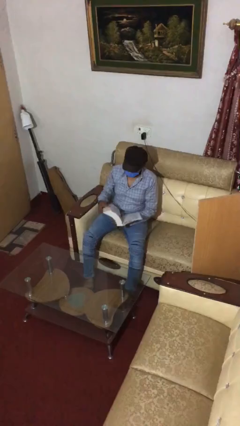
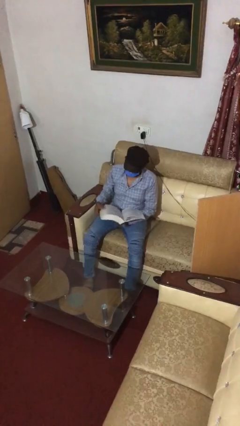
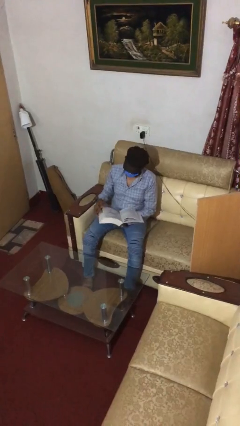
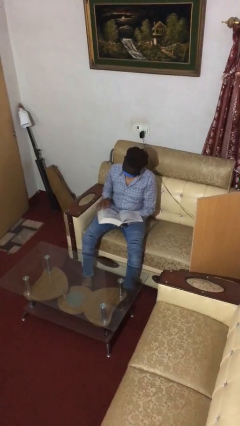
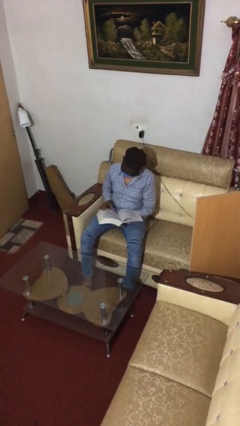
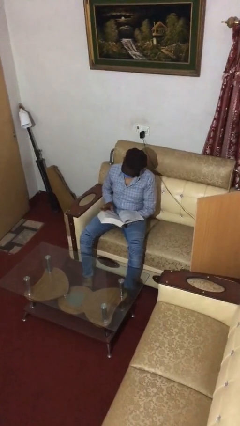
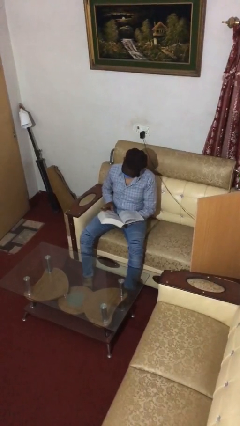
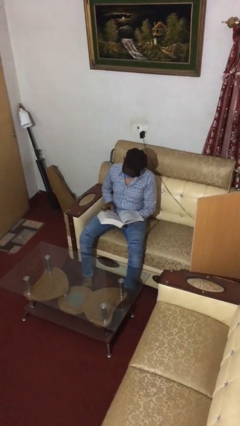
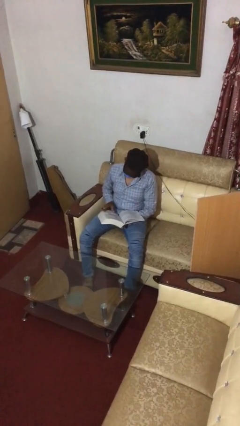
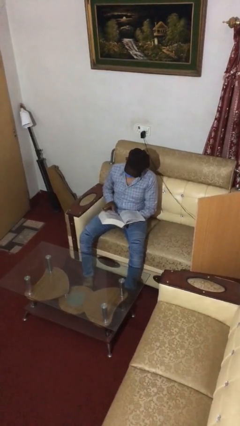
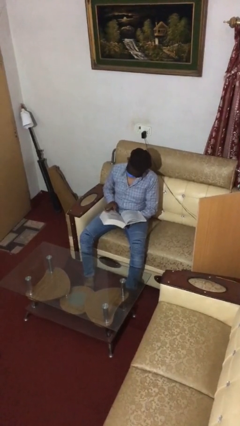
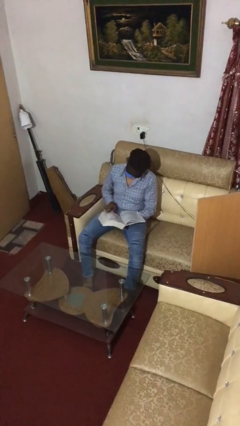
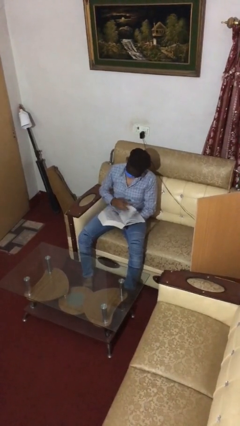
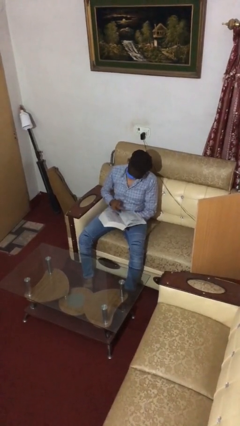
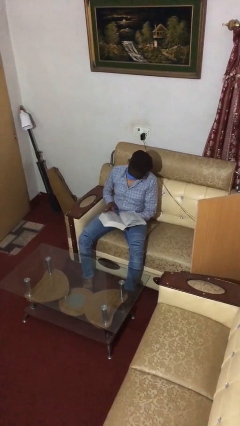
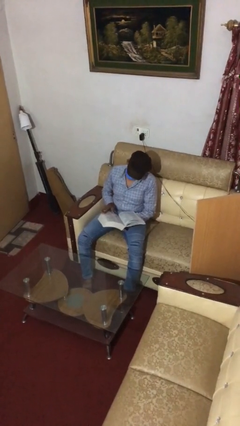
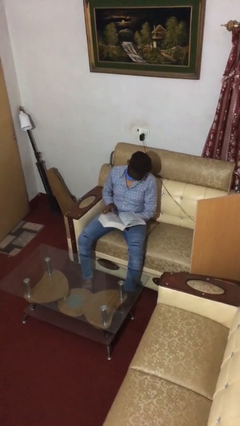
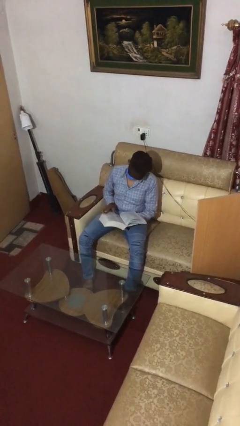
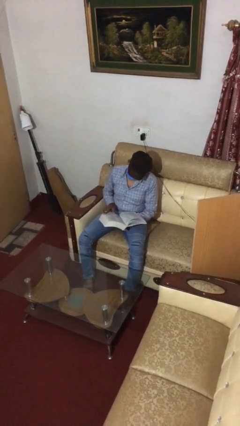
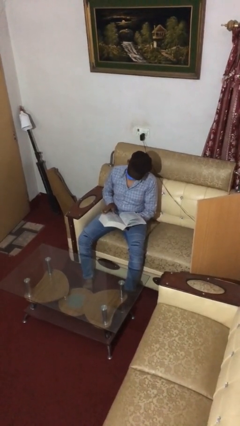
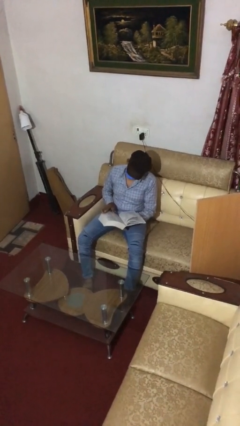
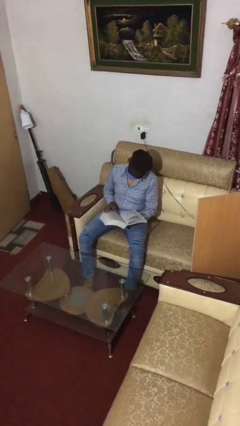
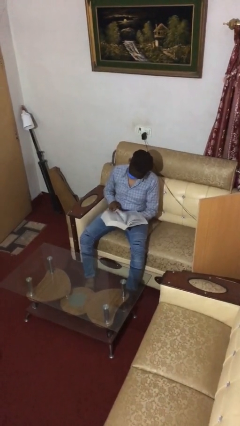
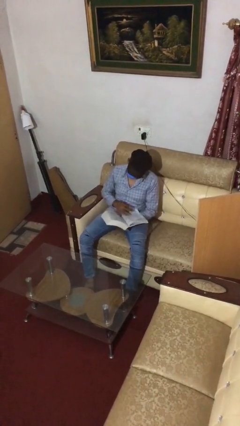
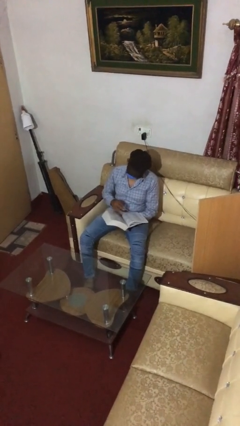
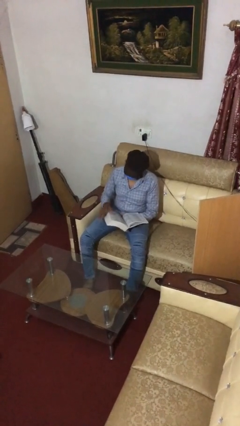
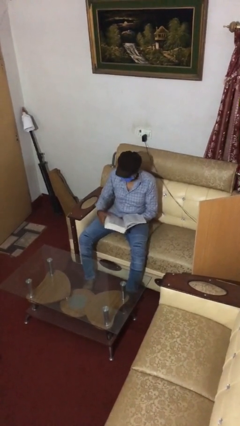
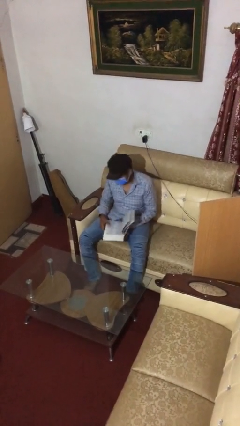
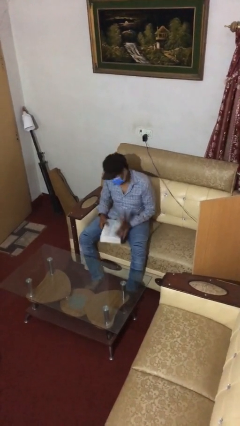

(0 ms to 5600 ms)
person reads document

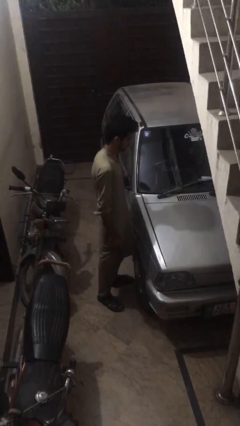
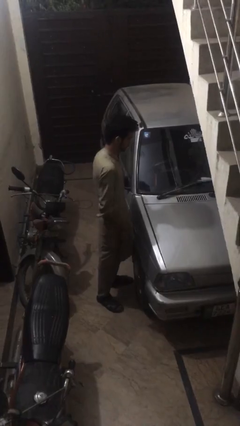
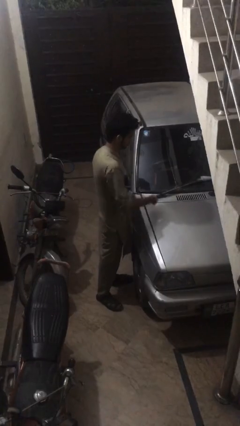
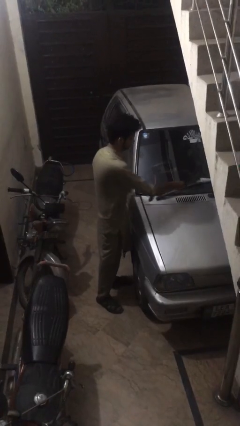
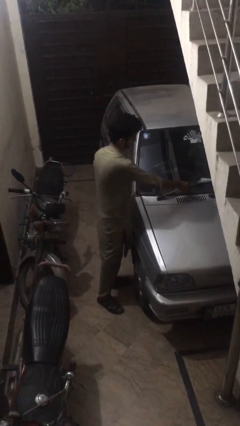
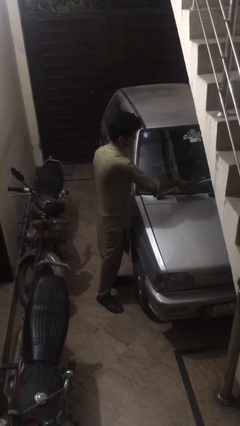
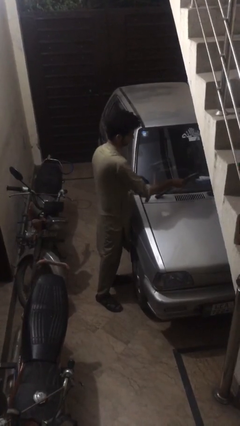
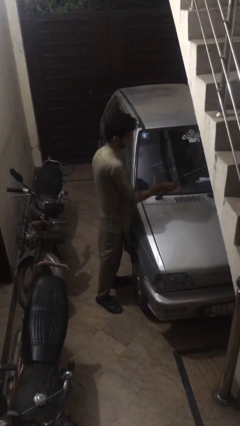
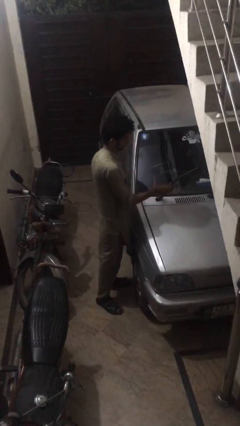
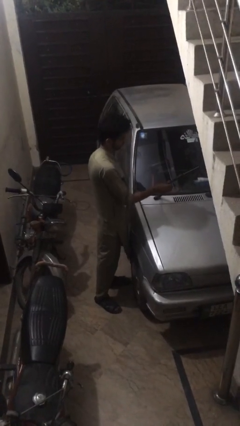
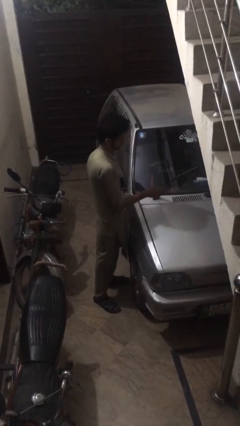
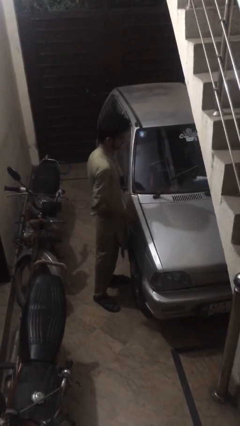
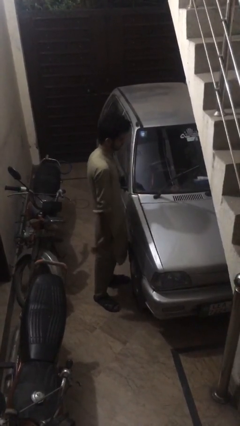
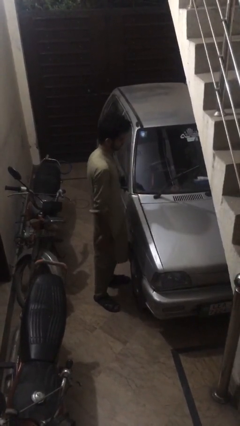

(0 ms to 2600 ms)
person flips up car wipers

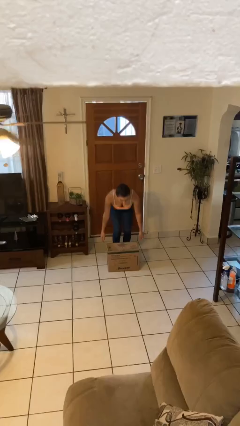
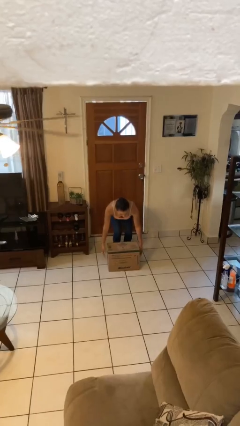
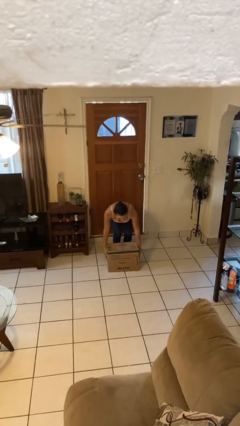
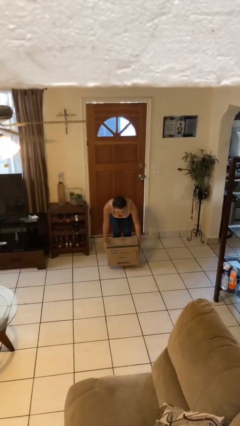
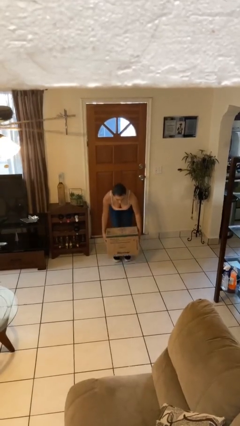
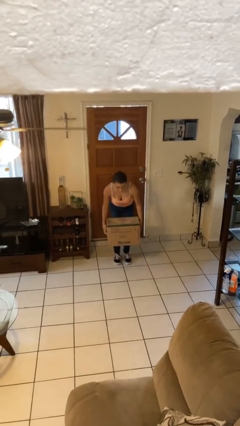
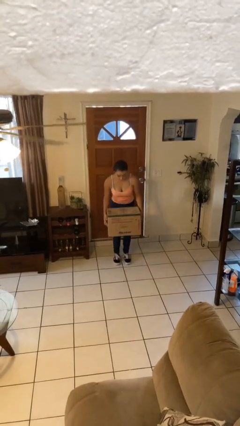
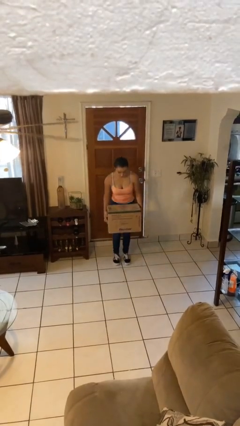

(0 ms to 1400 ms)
person picks up object from floor

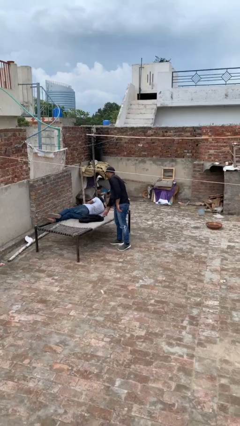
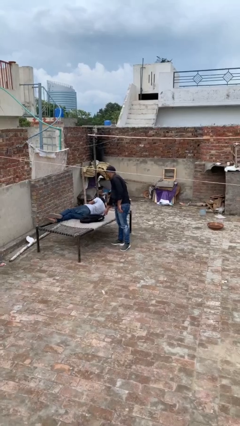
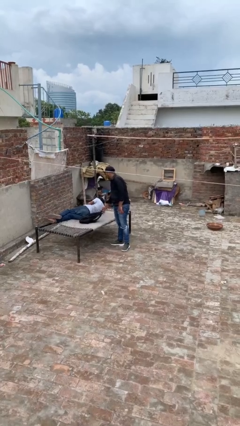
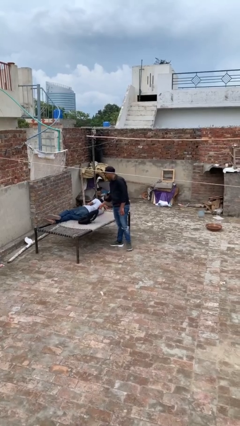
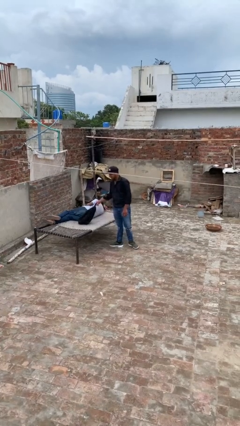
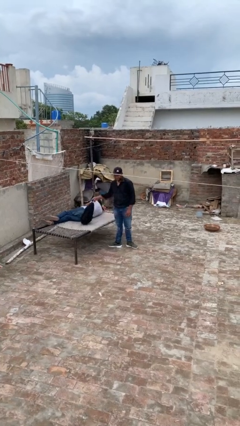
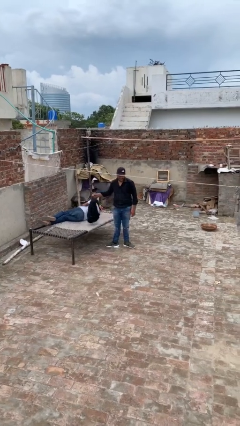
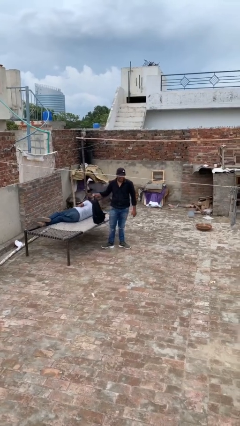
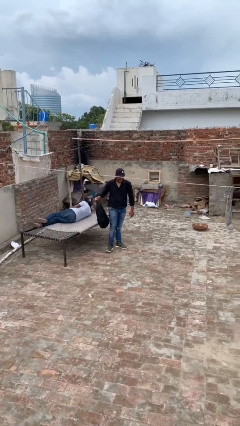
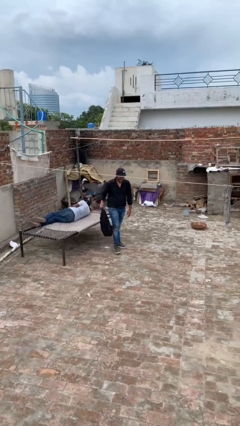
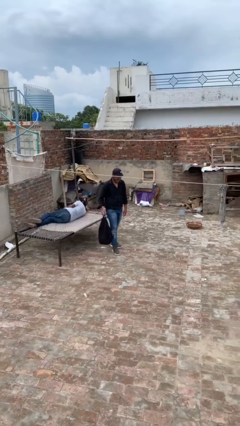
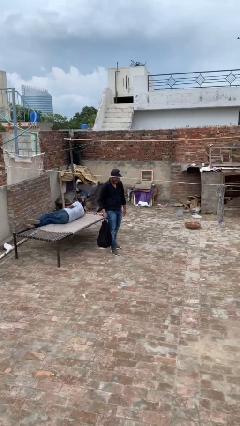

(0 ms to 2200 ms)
person steals object from person

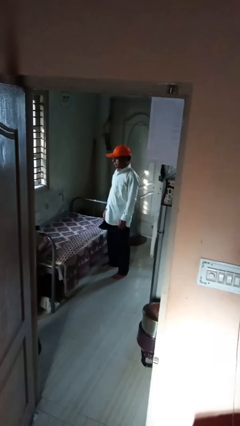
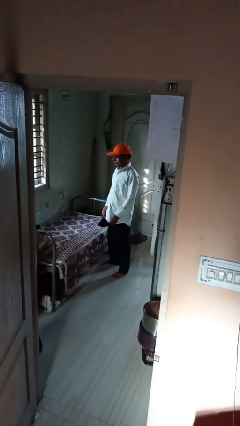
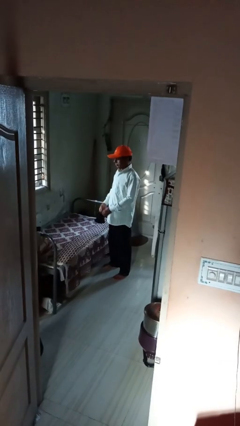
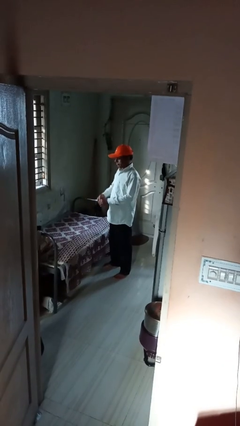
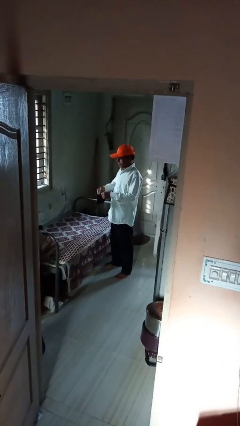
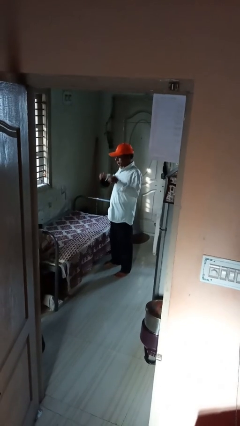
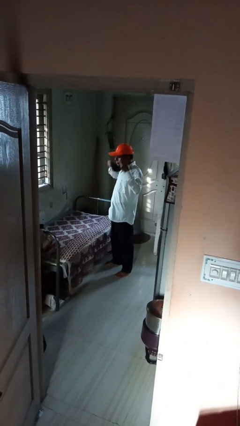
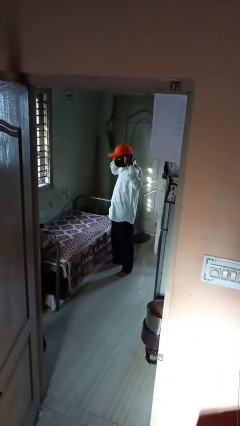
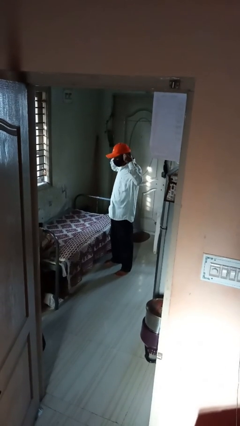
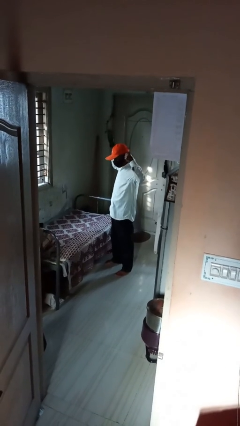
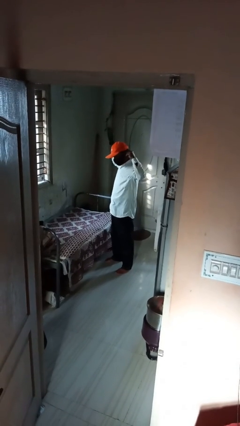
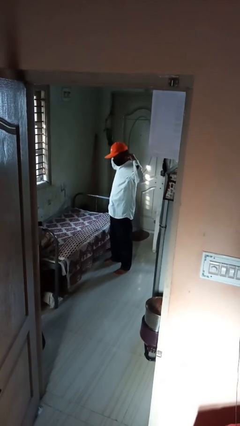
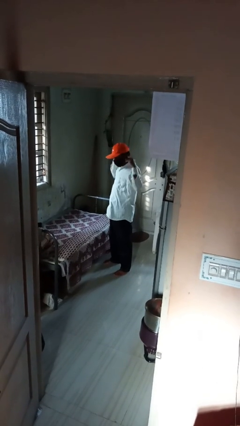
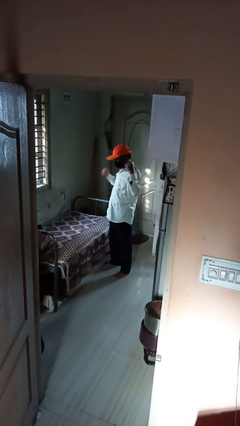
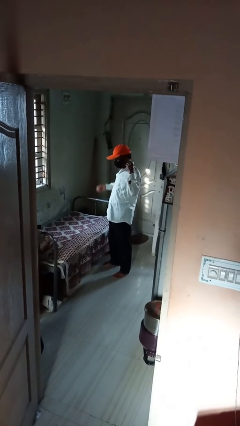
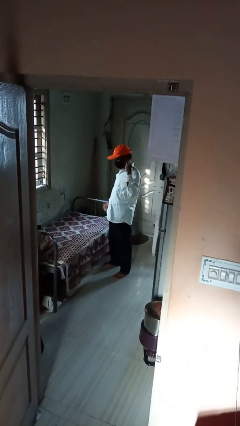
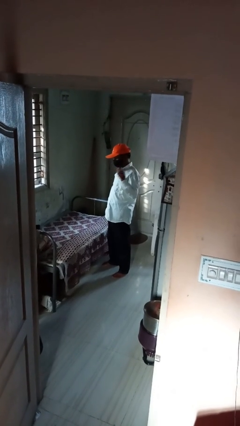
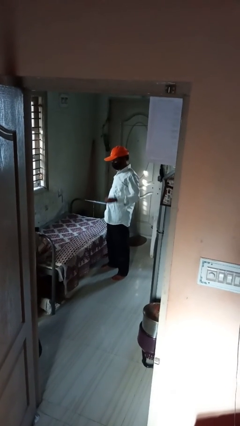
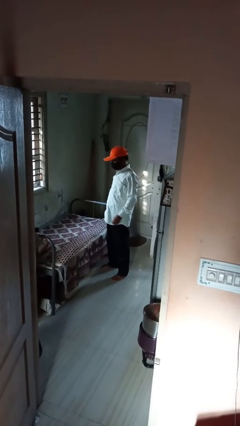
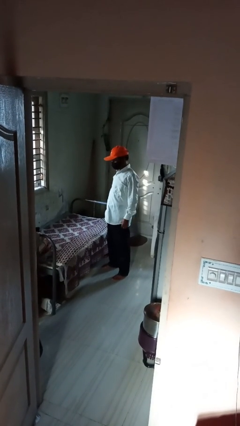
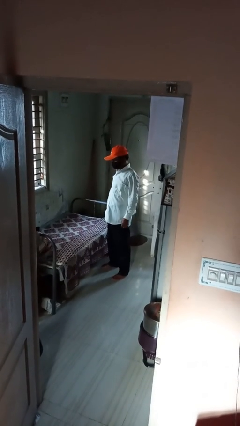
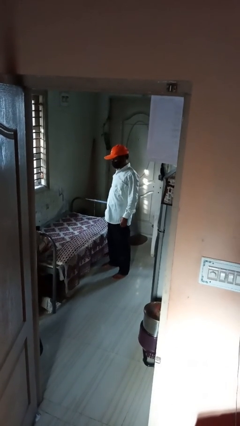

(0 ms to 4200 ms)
person puts on facemask

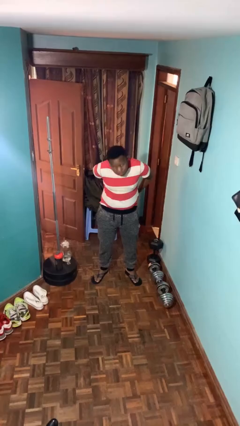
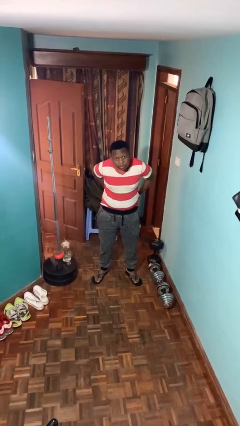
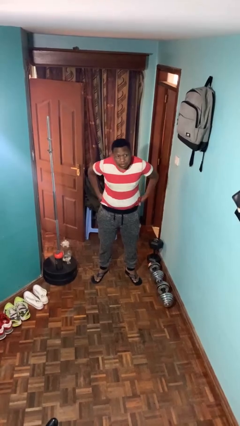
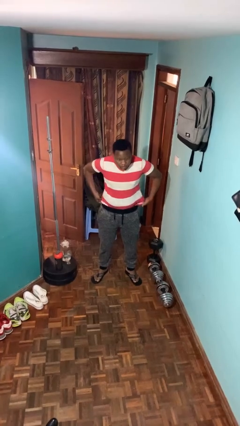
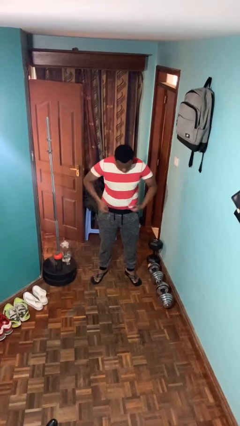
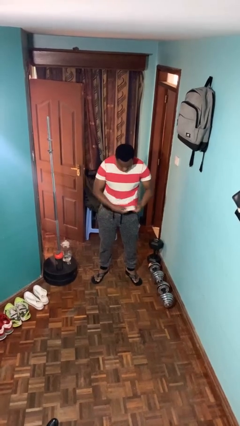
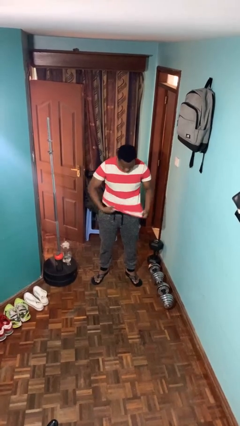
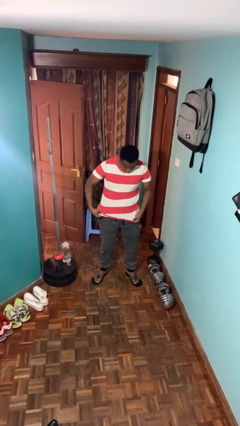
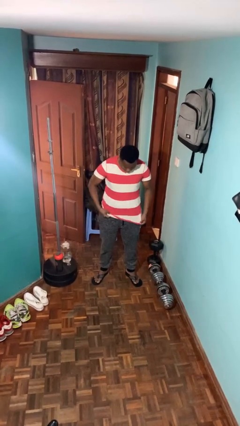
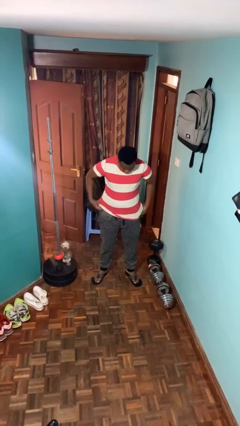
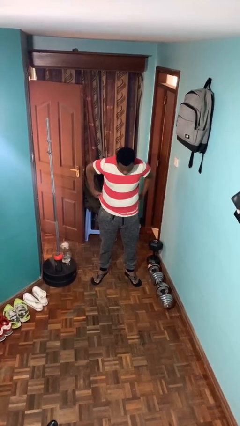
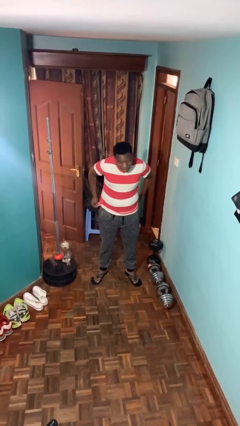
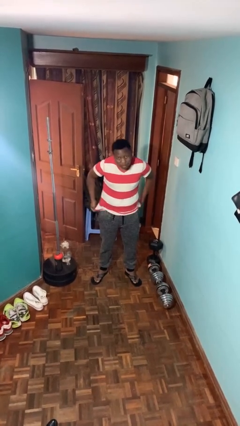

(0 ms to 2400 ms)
person untucks shirt
